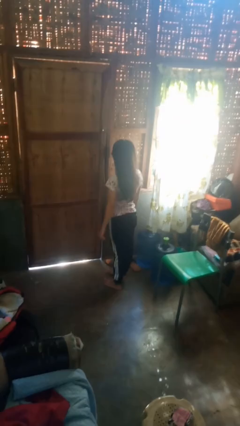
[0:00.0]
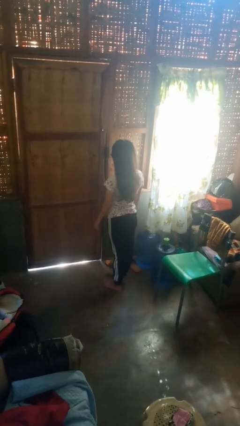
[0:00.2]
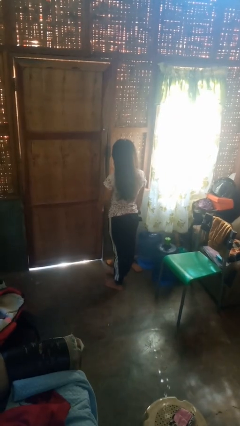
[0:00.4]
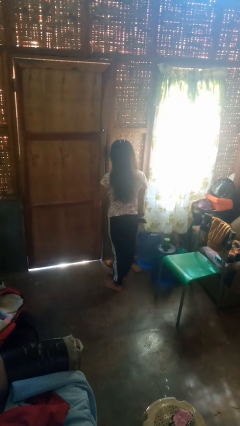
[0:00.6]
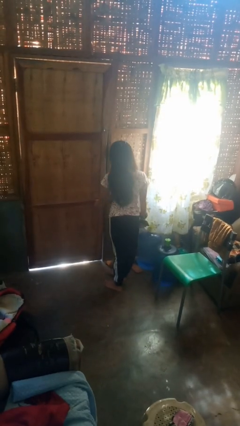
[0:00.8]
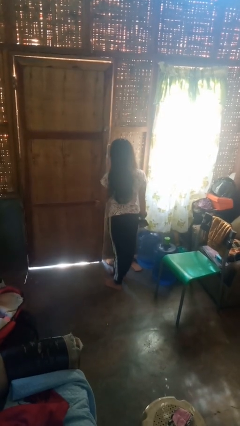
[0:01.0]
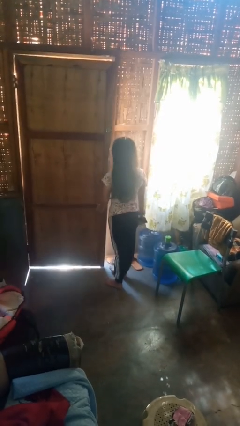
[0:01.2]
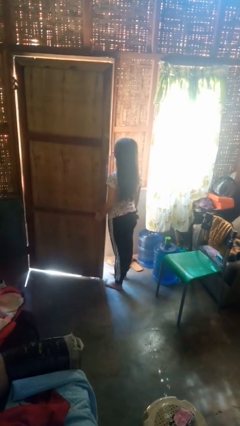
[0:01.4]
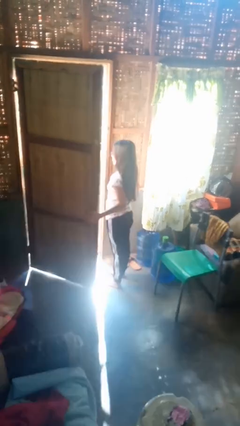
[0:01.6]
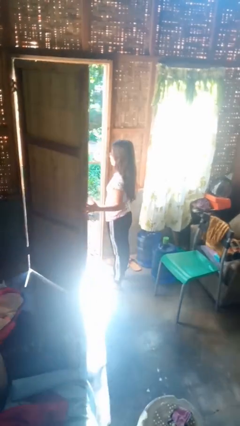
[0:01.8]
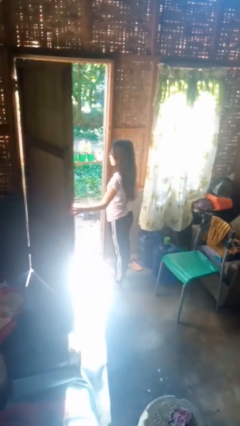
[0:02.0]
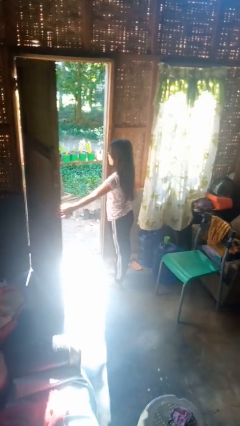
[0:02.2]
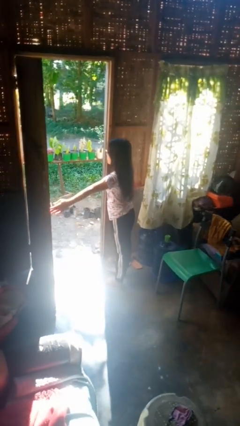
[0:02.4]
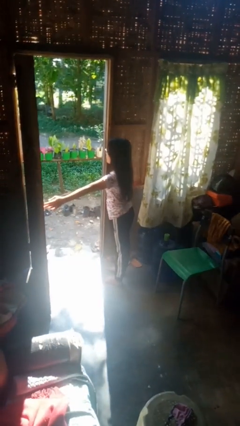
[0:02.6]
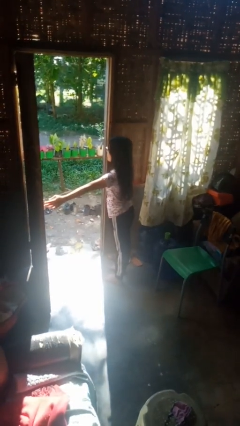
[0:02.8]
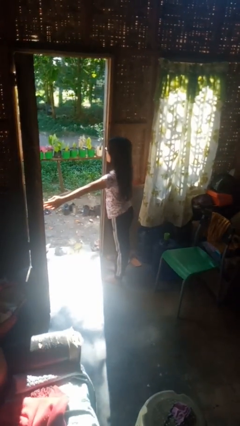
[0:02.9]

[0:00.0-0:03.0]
person opens facility door

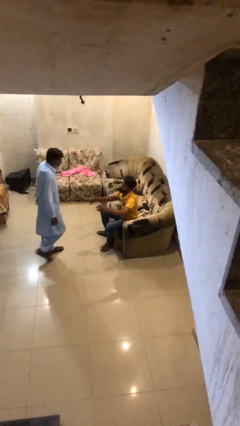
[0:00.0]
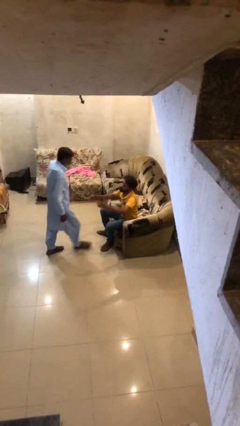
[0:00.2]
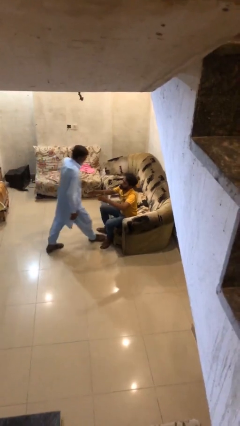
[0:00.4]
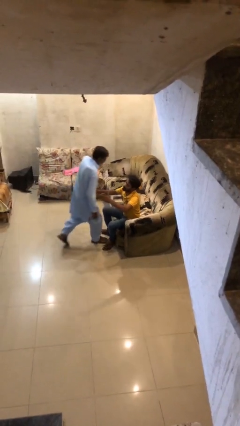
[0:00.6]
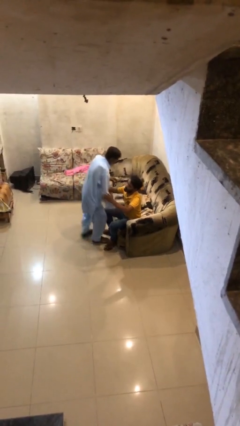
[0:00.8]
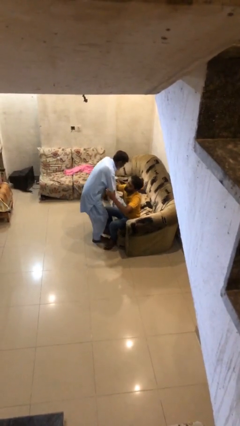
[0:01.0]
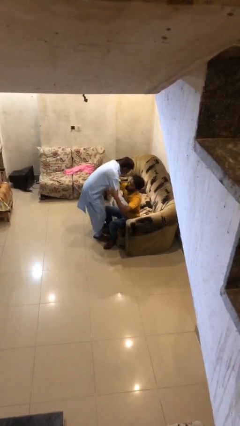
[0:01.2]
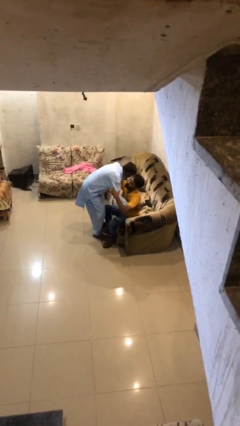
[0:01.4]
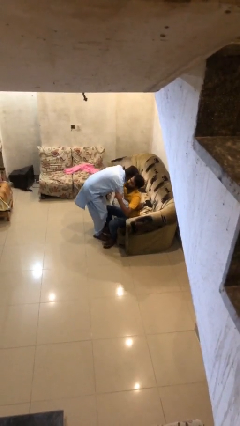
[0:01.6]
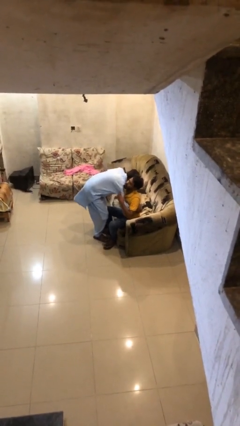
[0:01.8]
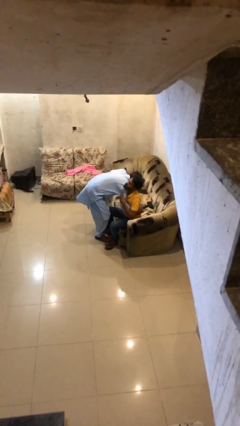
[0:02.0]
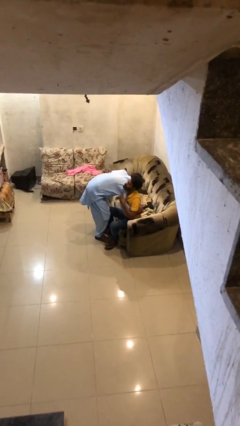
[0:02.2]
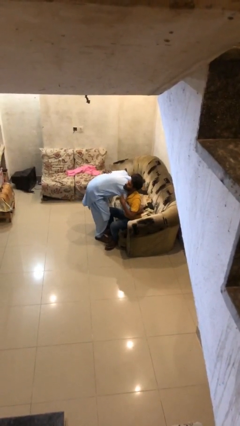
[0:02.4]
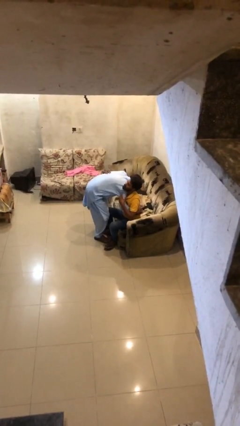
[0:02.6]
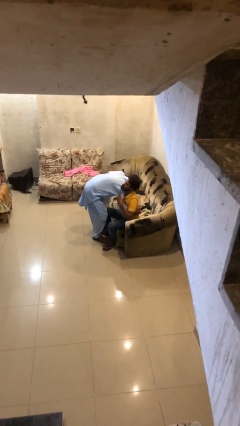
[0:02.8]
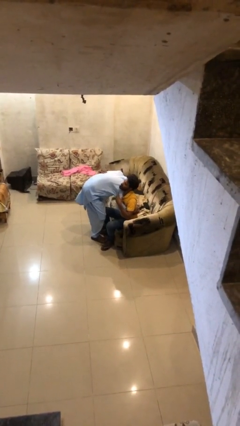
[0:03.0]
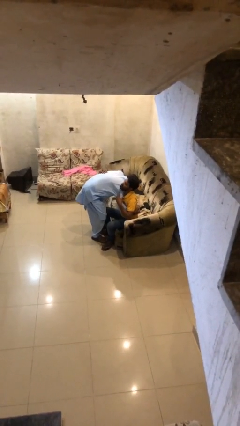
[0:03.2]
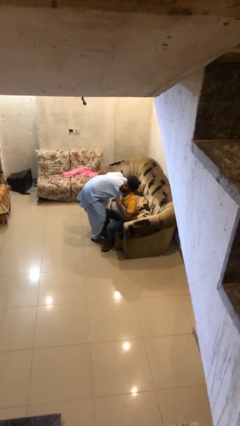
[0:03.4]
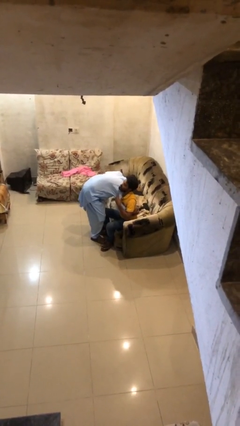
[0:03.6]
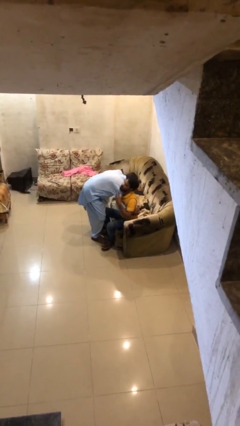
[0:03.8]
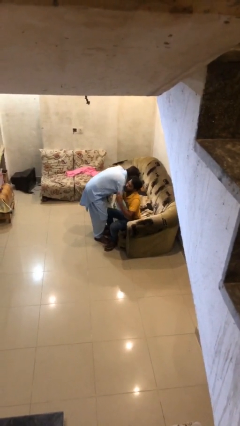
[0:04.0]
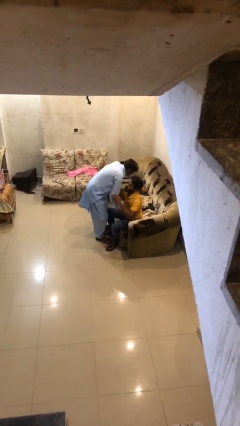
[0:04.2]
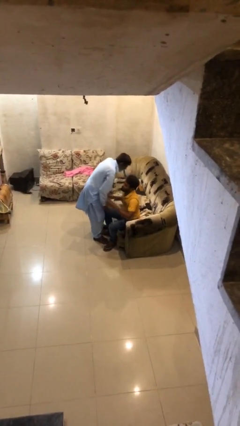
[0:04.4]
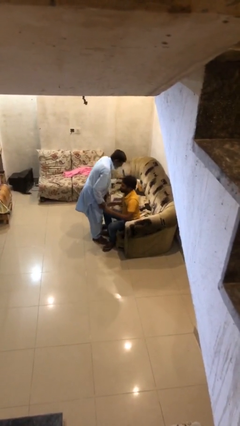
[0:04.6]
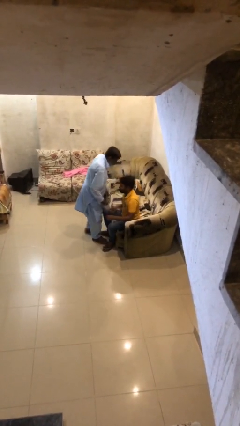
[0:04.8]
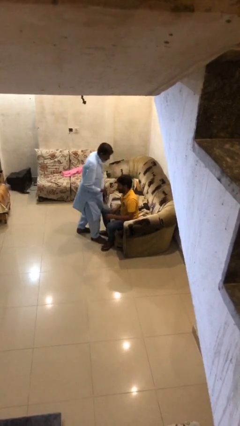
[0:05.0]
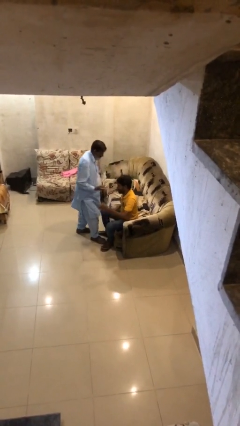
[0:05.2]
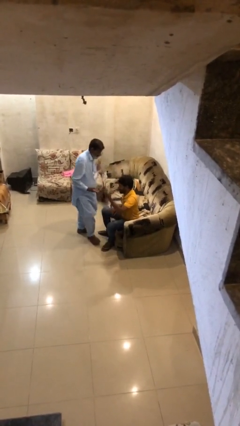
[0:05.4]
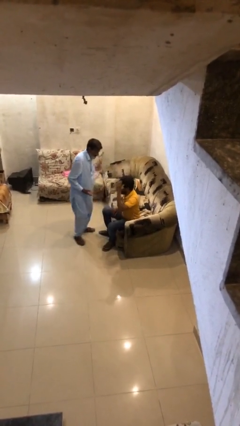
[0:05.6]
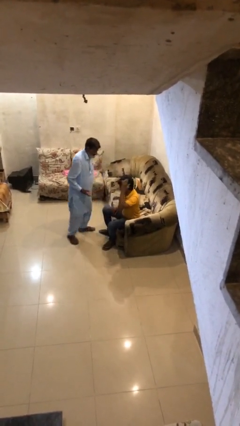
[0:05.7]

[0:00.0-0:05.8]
person embraces person

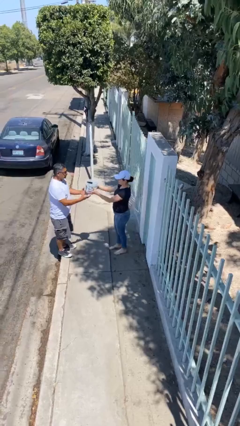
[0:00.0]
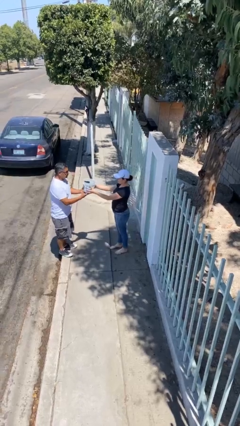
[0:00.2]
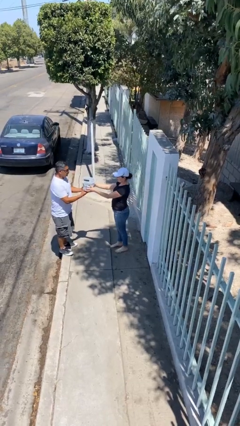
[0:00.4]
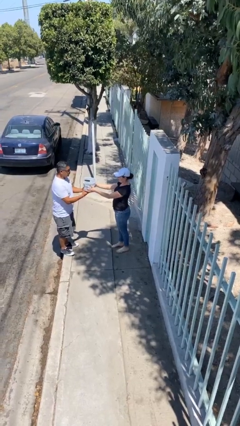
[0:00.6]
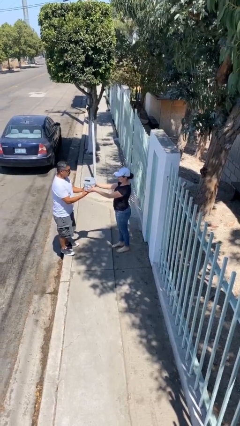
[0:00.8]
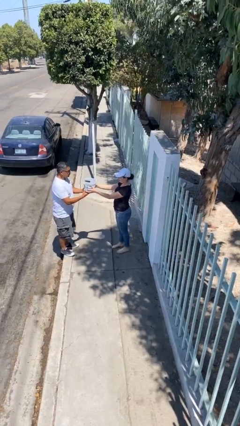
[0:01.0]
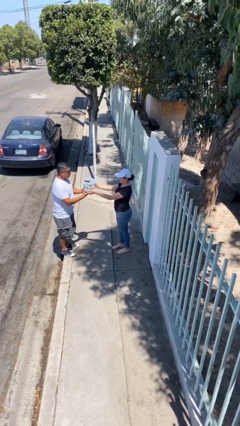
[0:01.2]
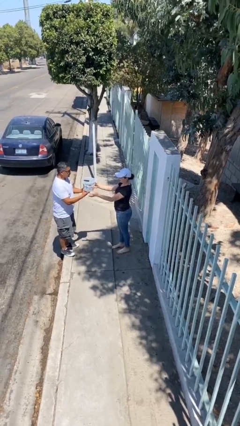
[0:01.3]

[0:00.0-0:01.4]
person transfers object to person

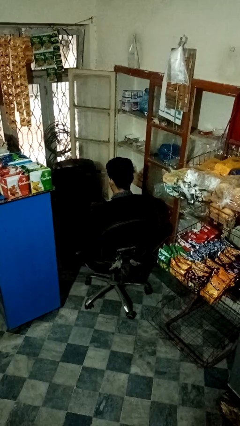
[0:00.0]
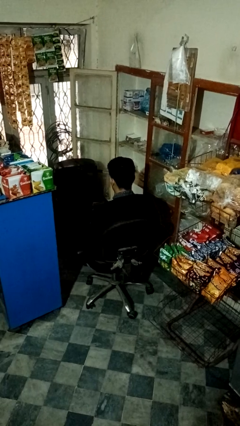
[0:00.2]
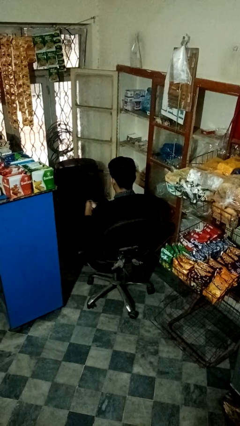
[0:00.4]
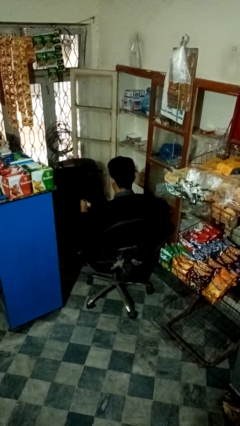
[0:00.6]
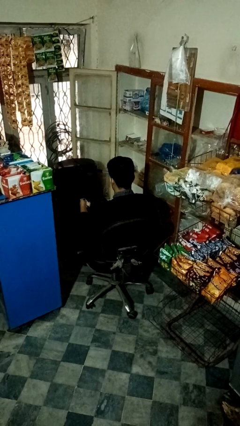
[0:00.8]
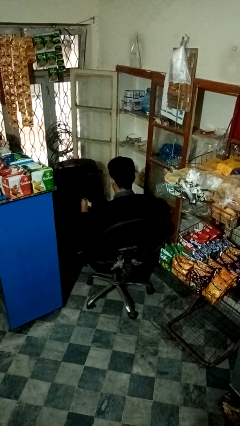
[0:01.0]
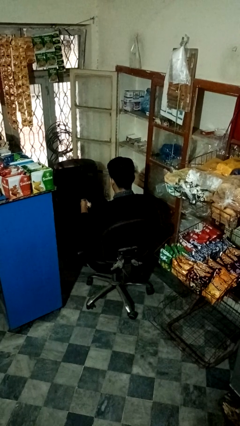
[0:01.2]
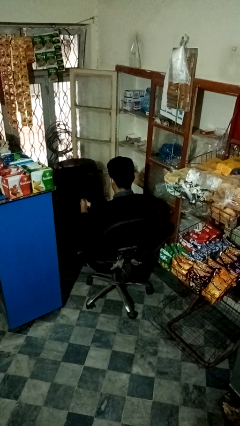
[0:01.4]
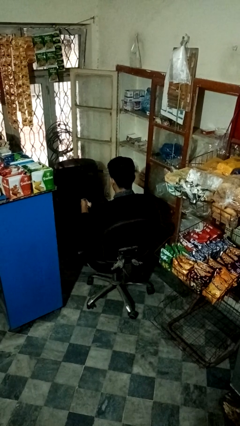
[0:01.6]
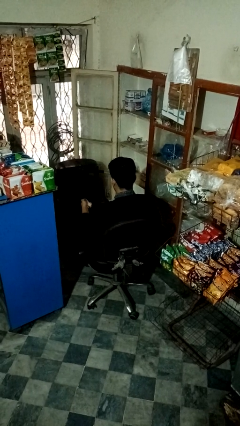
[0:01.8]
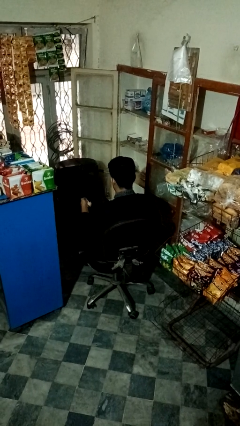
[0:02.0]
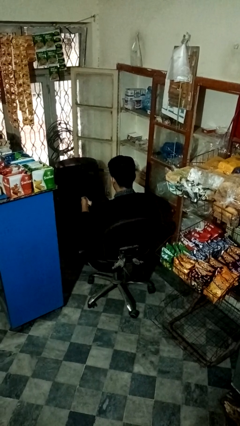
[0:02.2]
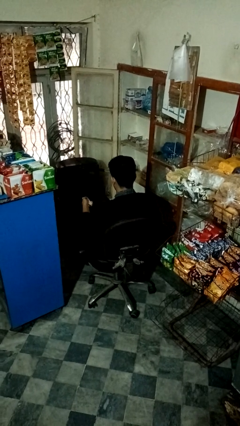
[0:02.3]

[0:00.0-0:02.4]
person uses television remote

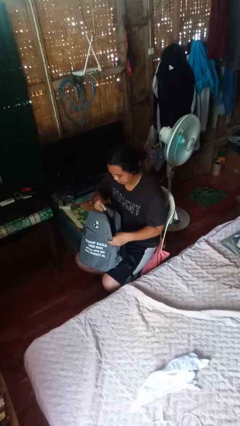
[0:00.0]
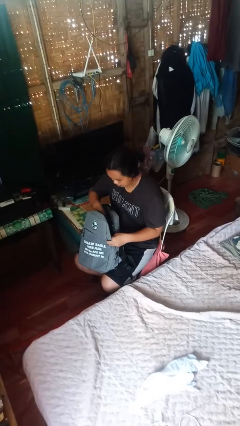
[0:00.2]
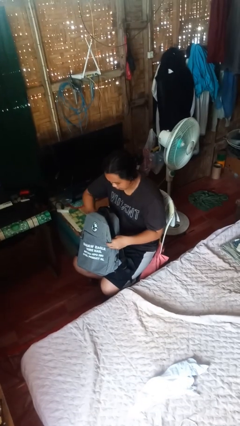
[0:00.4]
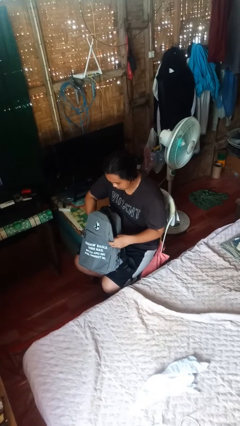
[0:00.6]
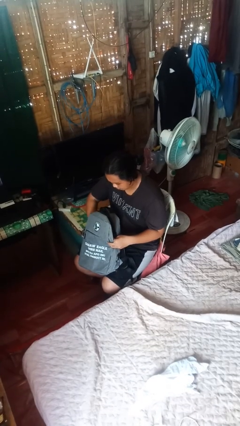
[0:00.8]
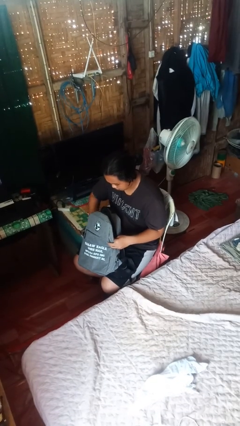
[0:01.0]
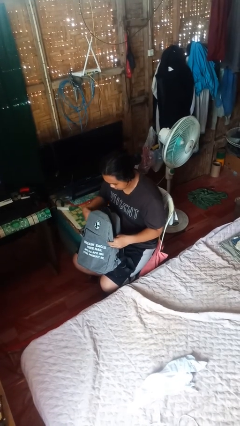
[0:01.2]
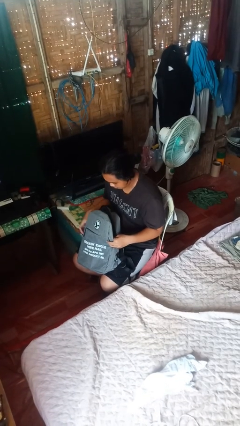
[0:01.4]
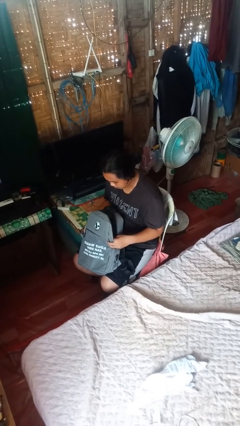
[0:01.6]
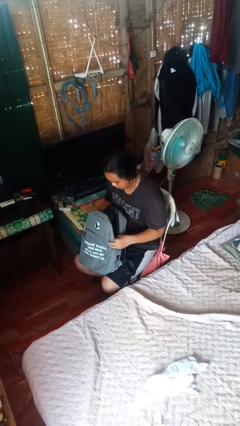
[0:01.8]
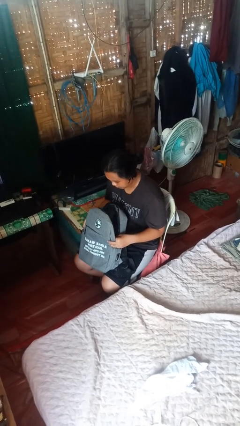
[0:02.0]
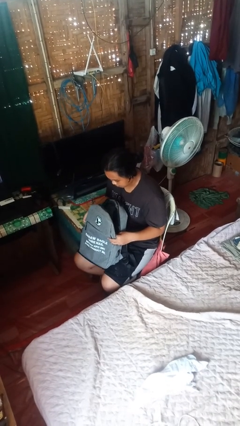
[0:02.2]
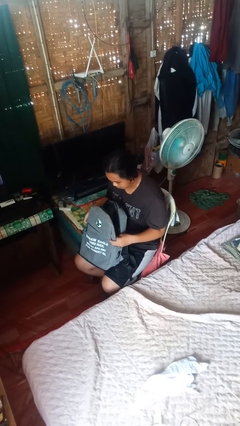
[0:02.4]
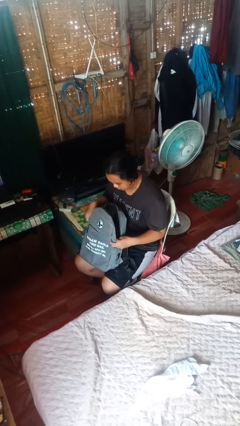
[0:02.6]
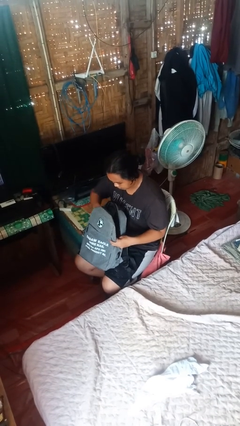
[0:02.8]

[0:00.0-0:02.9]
person puts object into backpack

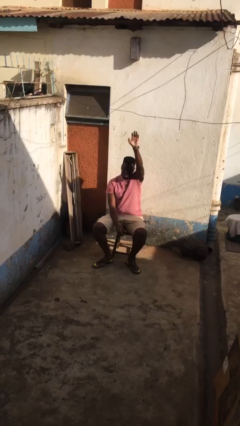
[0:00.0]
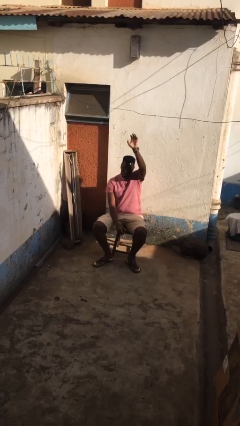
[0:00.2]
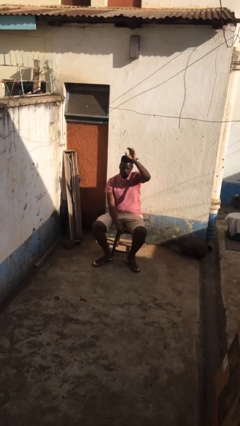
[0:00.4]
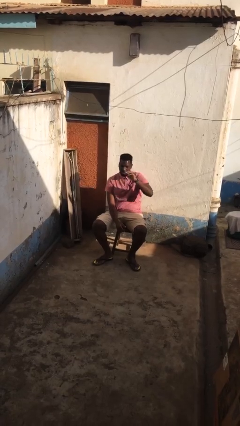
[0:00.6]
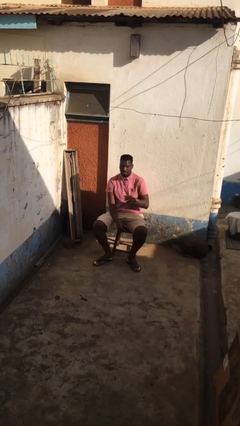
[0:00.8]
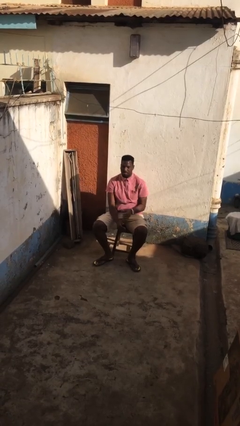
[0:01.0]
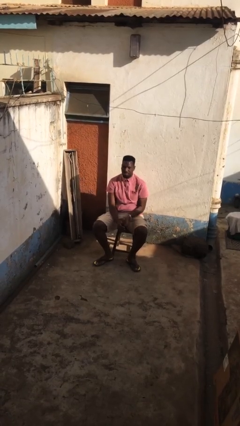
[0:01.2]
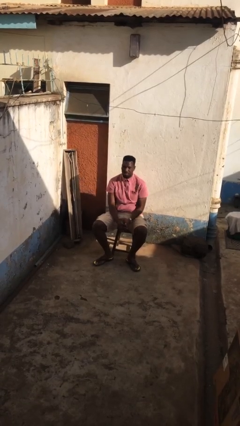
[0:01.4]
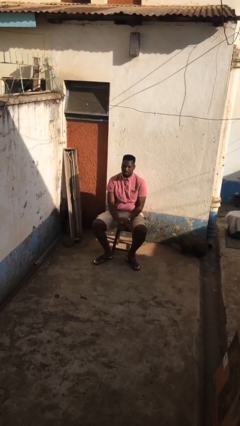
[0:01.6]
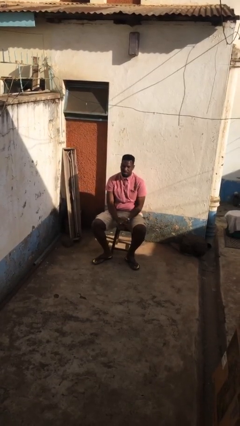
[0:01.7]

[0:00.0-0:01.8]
person gestures lower hand
